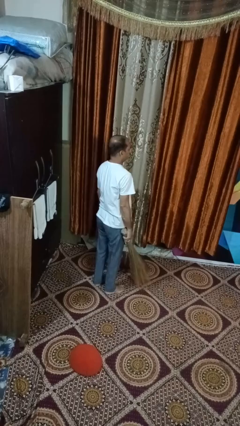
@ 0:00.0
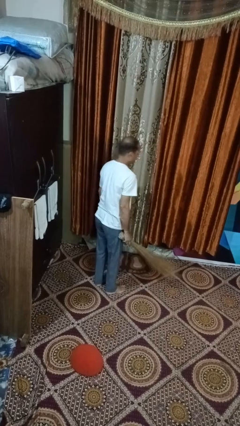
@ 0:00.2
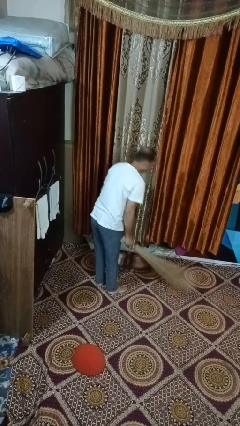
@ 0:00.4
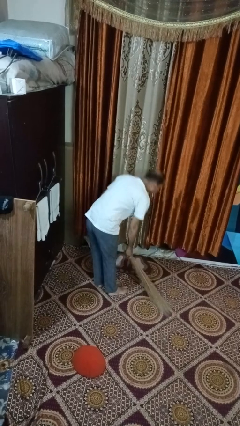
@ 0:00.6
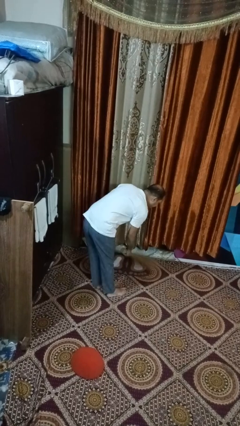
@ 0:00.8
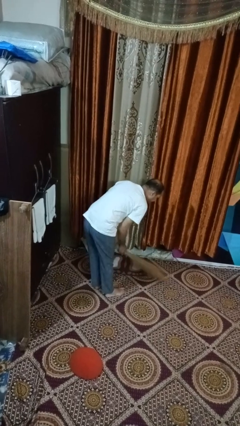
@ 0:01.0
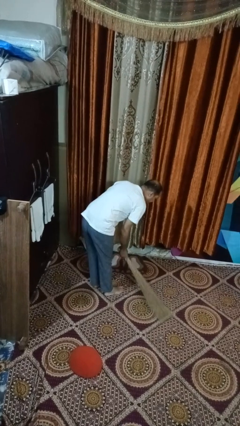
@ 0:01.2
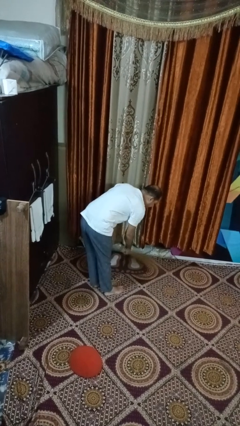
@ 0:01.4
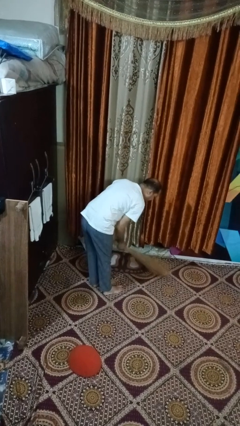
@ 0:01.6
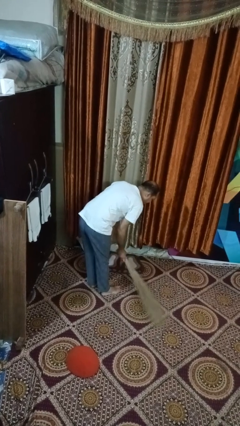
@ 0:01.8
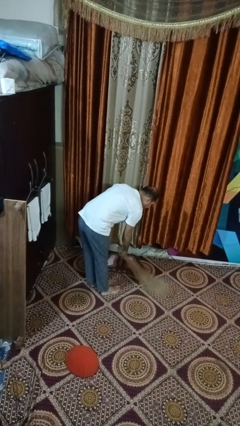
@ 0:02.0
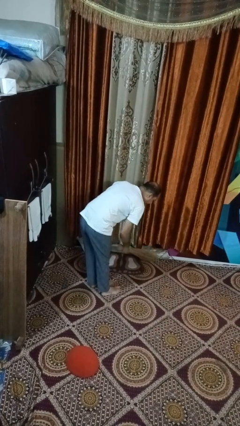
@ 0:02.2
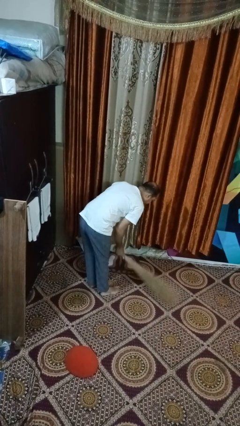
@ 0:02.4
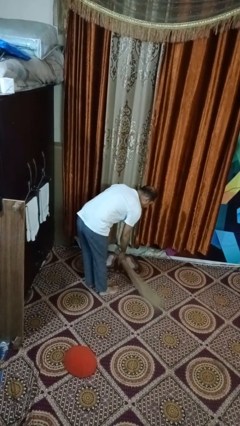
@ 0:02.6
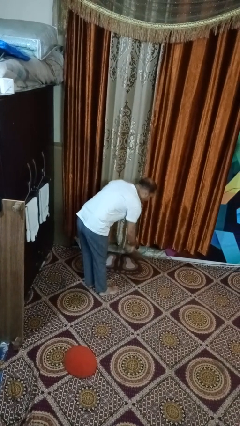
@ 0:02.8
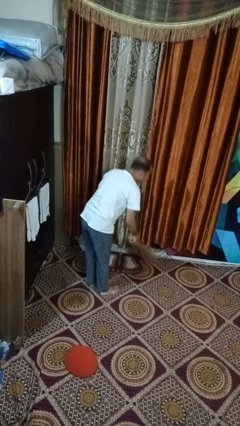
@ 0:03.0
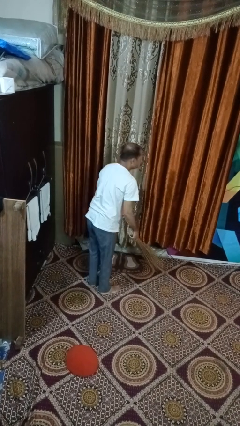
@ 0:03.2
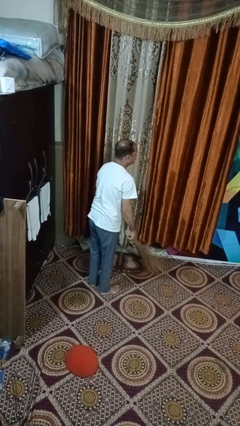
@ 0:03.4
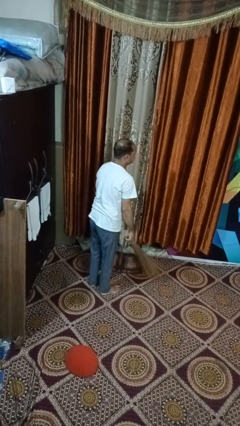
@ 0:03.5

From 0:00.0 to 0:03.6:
person sweeps floor

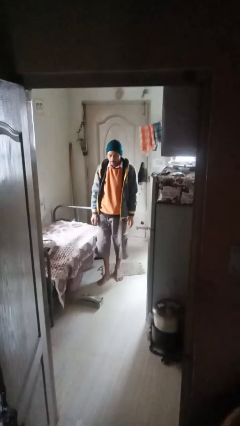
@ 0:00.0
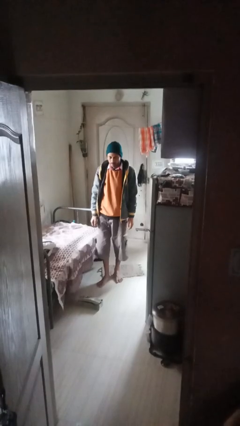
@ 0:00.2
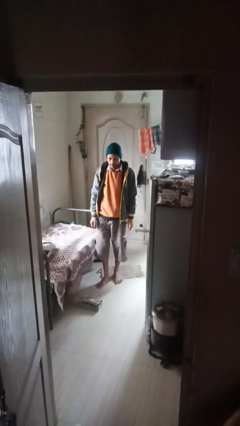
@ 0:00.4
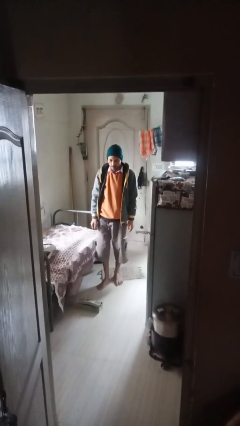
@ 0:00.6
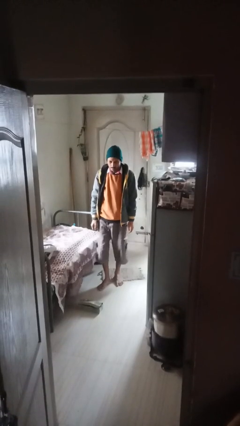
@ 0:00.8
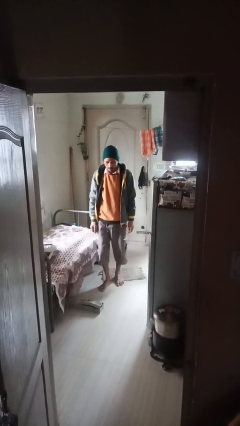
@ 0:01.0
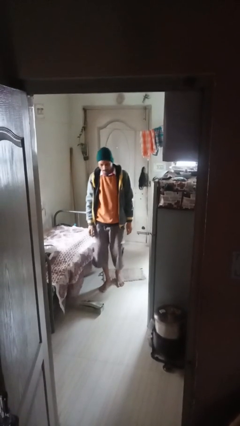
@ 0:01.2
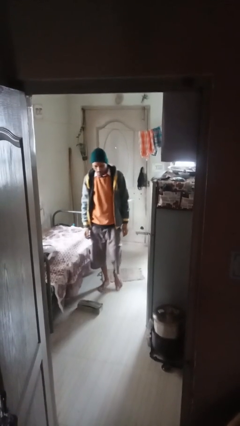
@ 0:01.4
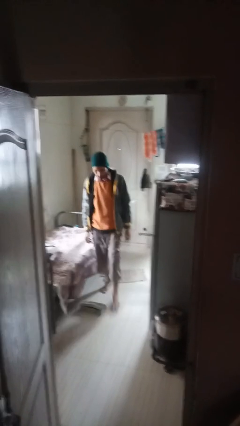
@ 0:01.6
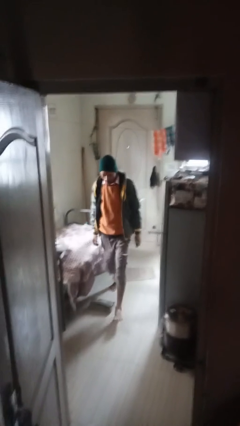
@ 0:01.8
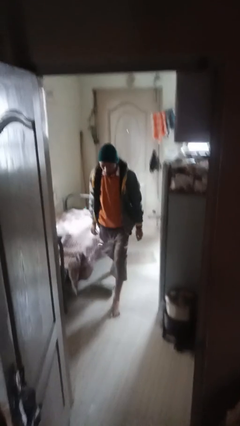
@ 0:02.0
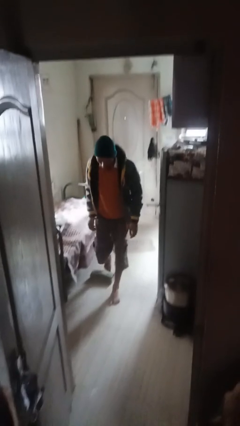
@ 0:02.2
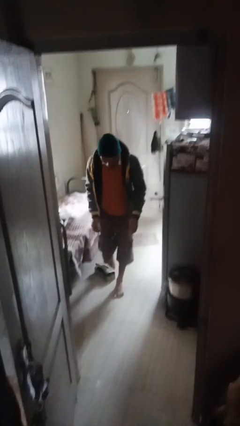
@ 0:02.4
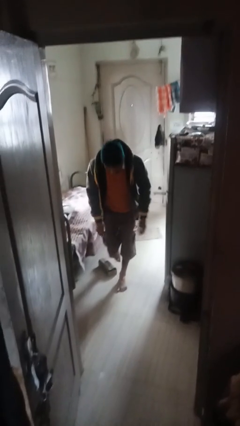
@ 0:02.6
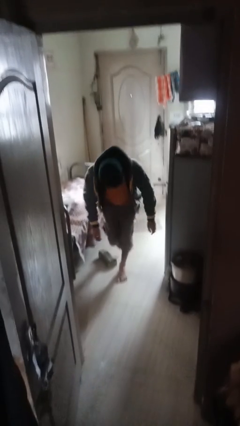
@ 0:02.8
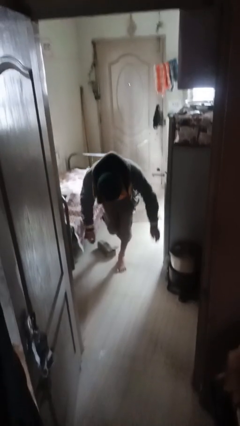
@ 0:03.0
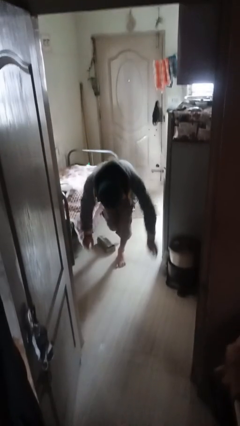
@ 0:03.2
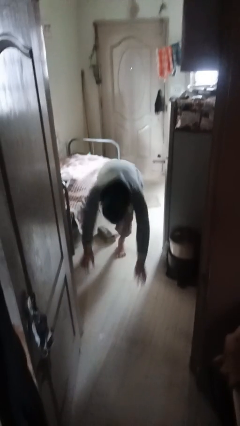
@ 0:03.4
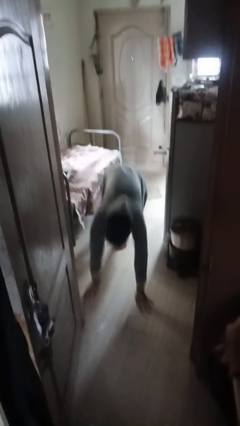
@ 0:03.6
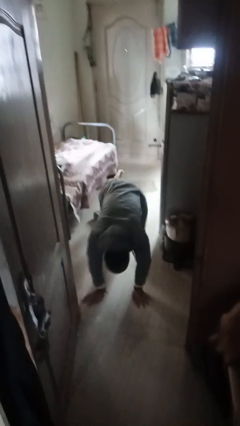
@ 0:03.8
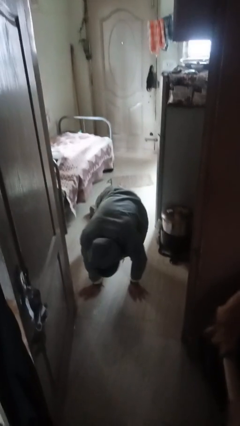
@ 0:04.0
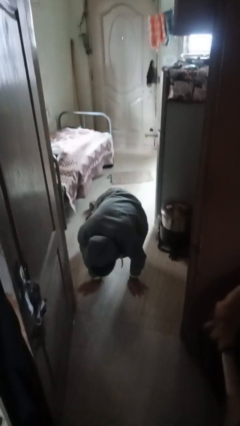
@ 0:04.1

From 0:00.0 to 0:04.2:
person trips on object on floor

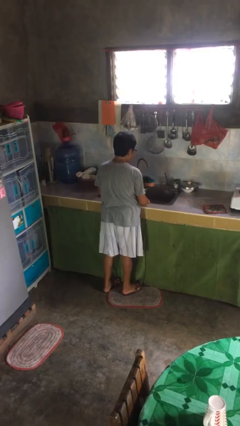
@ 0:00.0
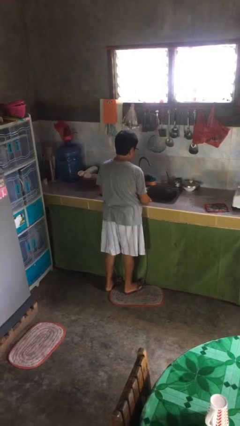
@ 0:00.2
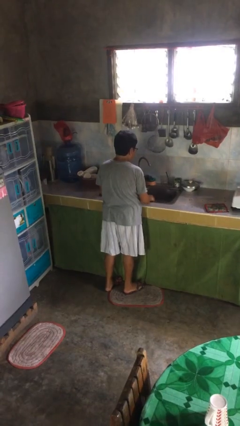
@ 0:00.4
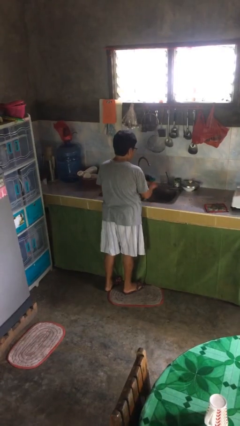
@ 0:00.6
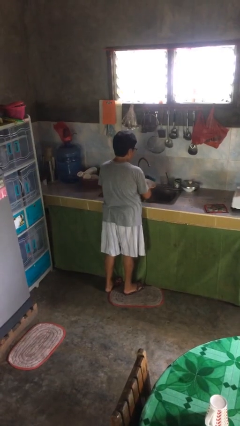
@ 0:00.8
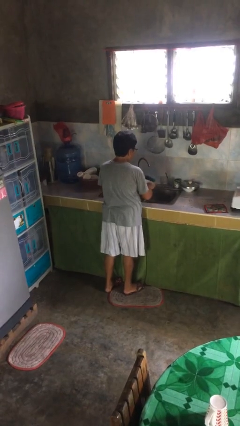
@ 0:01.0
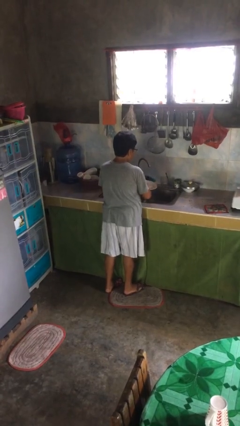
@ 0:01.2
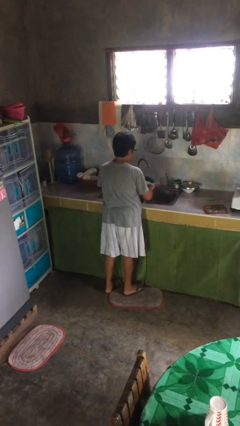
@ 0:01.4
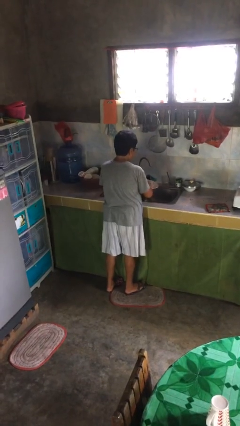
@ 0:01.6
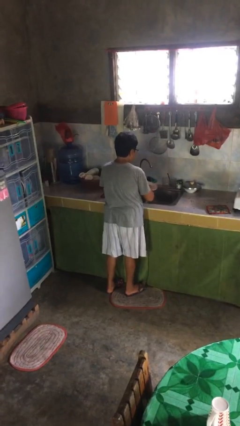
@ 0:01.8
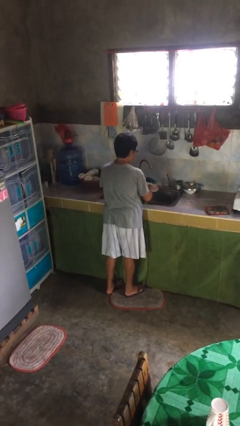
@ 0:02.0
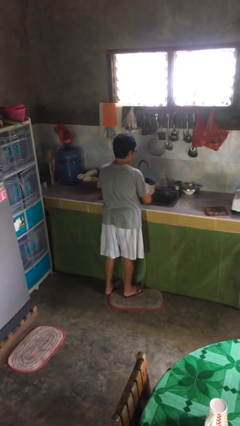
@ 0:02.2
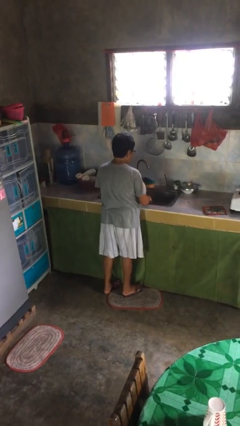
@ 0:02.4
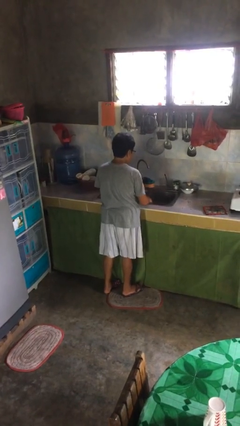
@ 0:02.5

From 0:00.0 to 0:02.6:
person washes dish

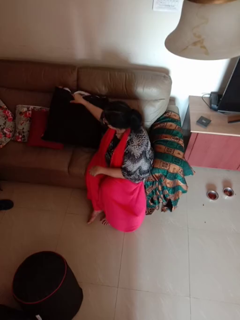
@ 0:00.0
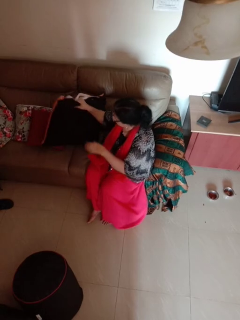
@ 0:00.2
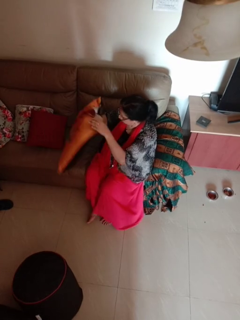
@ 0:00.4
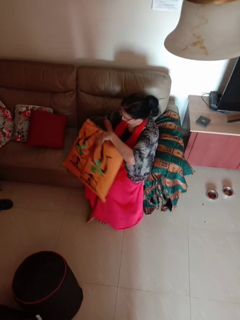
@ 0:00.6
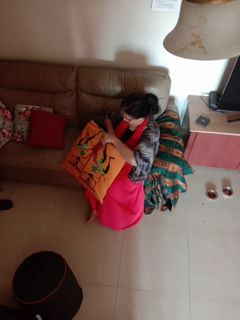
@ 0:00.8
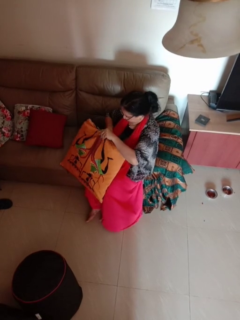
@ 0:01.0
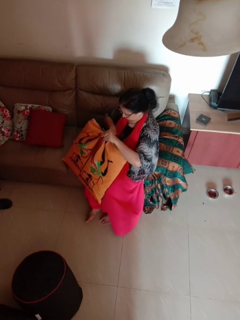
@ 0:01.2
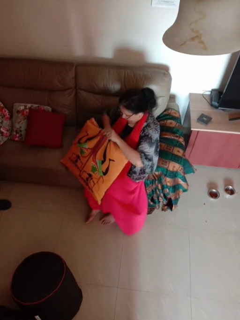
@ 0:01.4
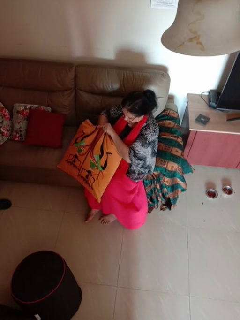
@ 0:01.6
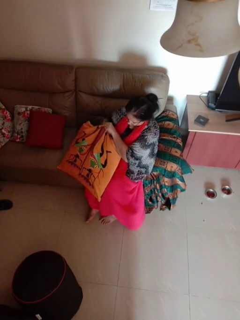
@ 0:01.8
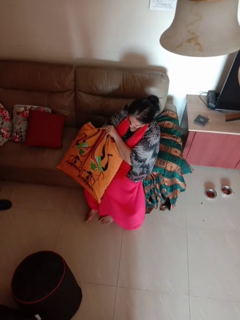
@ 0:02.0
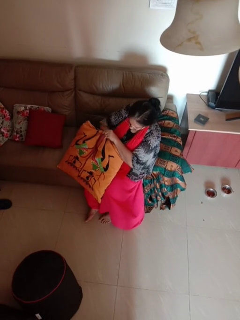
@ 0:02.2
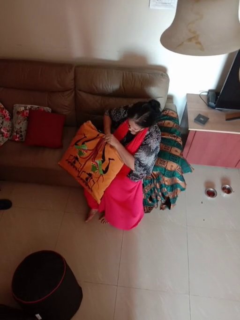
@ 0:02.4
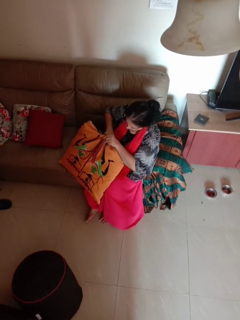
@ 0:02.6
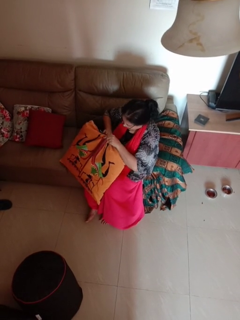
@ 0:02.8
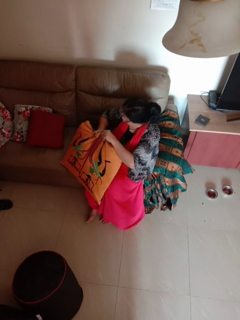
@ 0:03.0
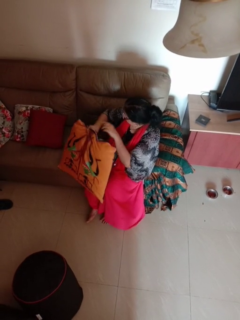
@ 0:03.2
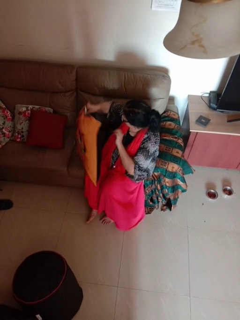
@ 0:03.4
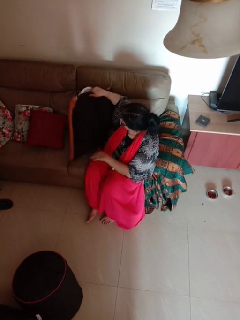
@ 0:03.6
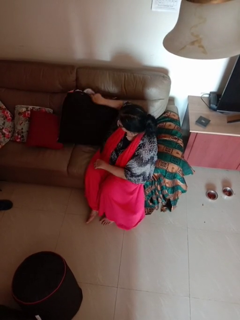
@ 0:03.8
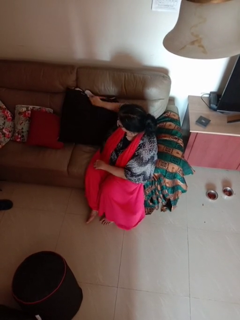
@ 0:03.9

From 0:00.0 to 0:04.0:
person searches in couch

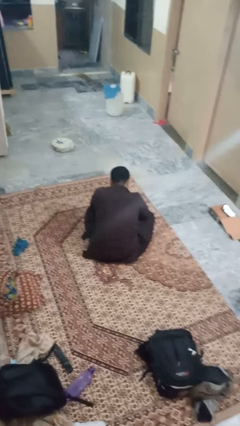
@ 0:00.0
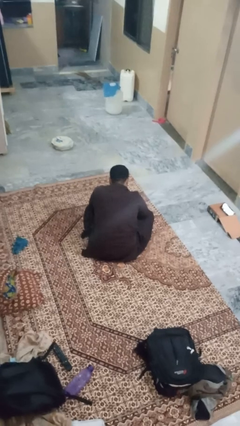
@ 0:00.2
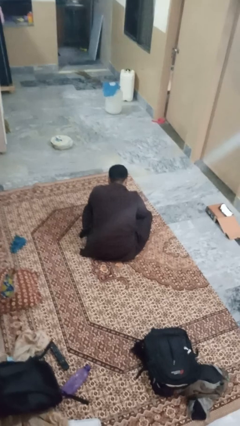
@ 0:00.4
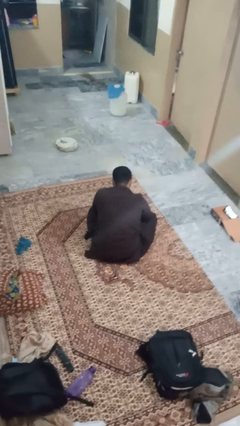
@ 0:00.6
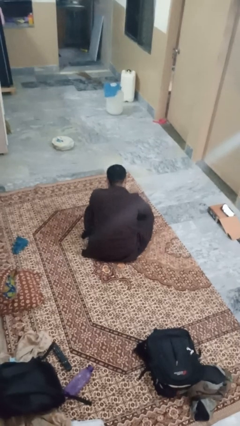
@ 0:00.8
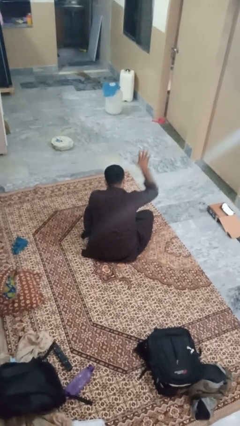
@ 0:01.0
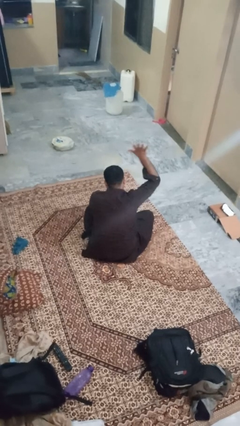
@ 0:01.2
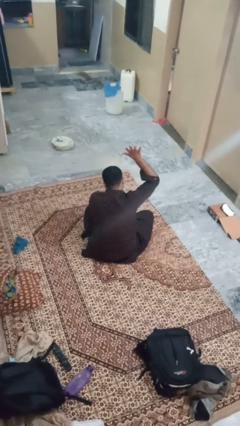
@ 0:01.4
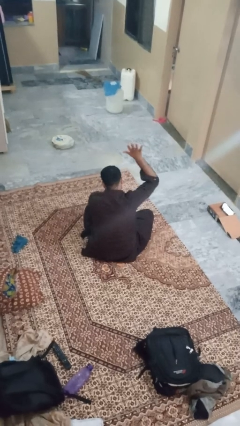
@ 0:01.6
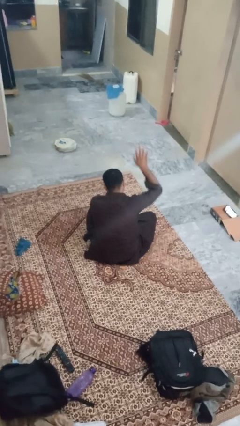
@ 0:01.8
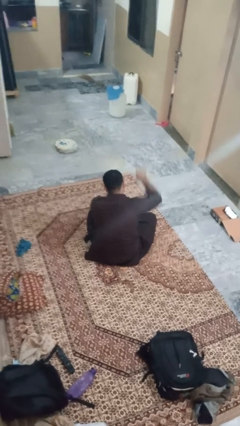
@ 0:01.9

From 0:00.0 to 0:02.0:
person gestures number five

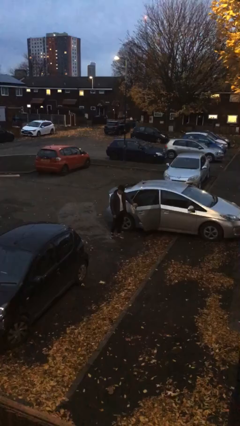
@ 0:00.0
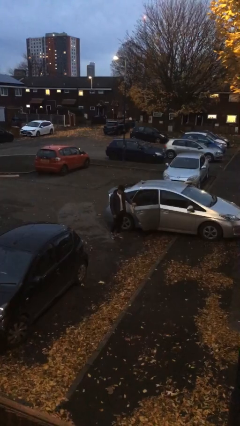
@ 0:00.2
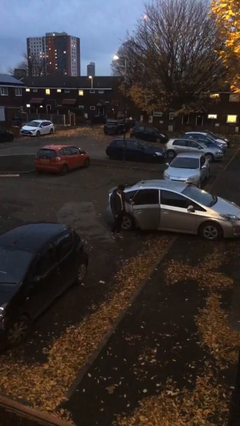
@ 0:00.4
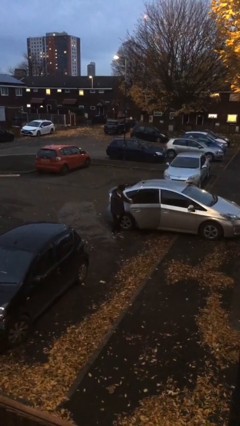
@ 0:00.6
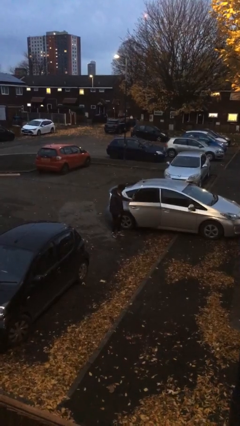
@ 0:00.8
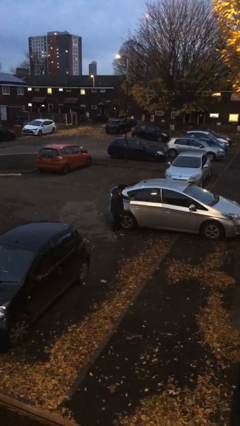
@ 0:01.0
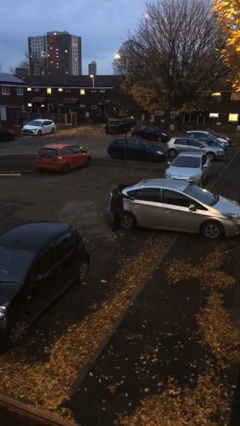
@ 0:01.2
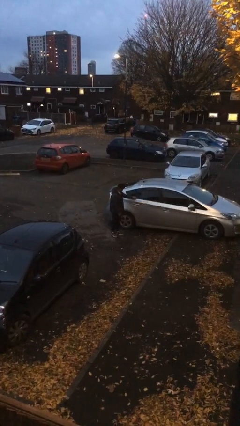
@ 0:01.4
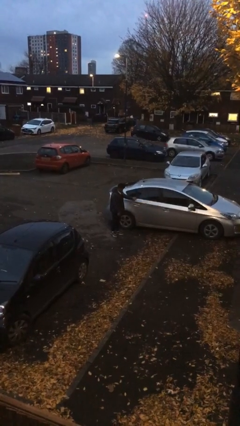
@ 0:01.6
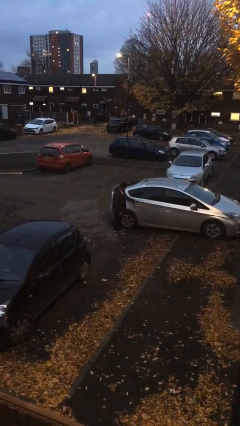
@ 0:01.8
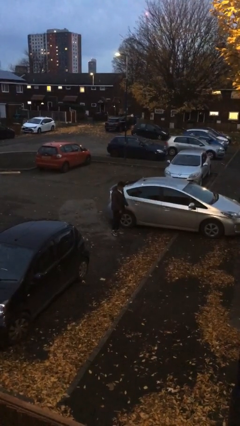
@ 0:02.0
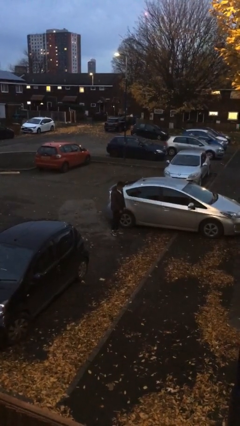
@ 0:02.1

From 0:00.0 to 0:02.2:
person closes car door
